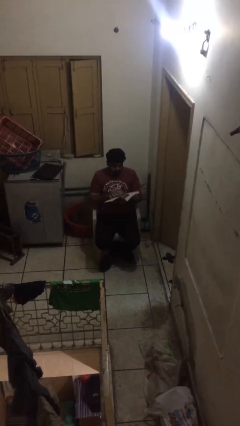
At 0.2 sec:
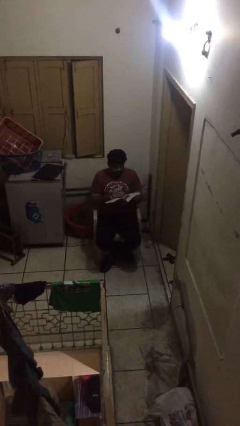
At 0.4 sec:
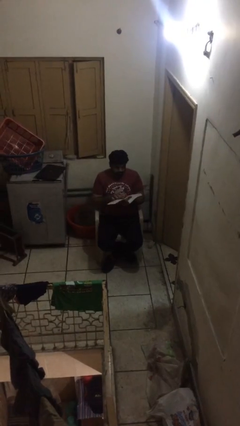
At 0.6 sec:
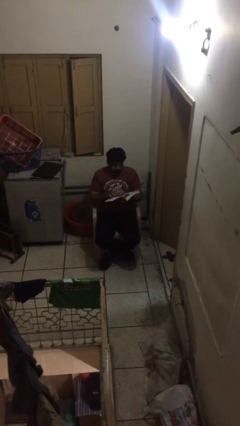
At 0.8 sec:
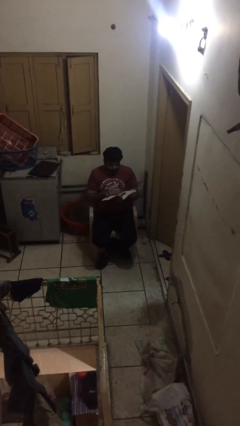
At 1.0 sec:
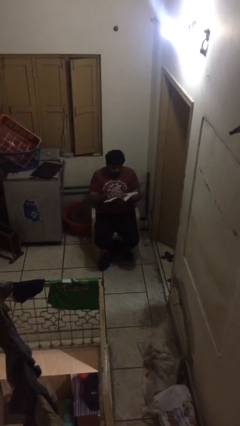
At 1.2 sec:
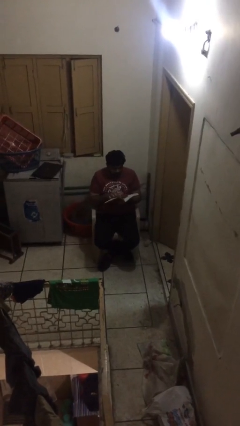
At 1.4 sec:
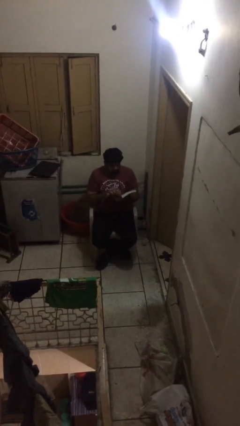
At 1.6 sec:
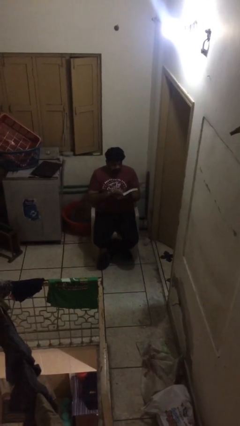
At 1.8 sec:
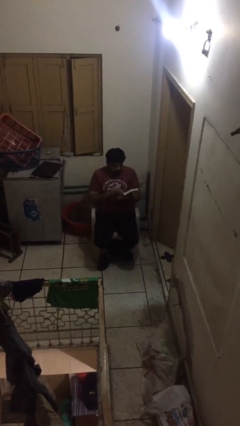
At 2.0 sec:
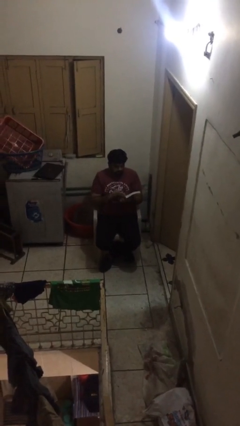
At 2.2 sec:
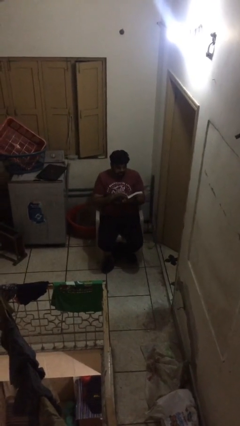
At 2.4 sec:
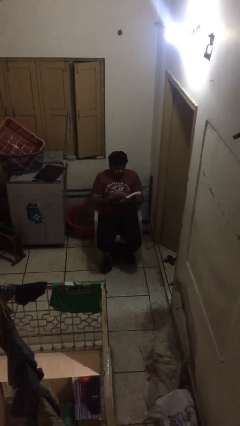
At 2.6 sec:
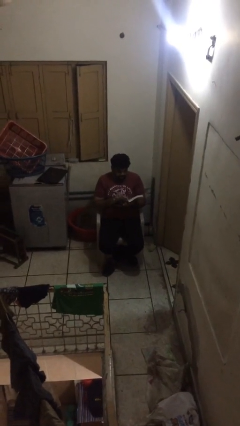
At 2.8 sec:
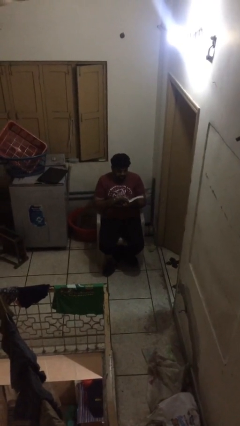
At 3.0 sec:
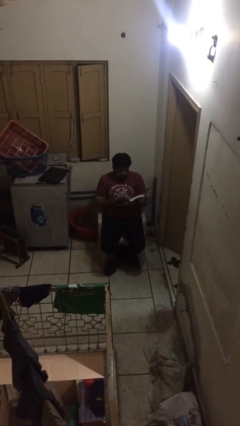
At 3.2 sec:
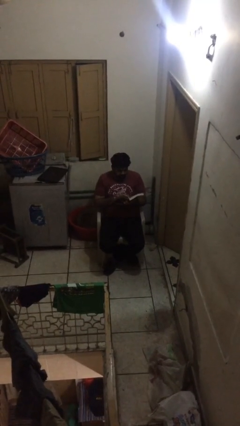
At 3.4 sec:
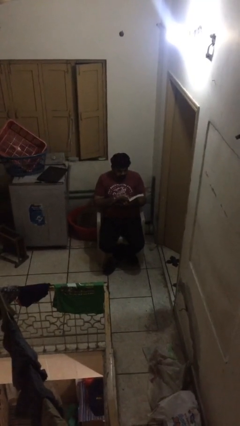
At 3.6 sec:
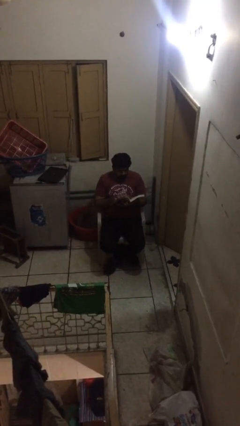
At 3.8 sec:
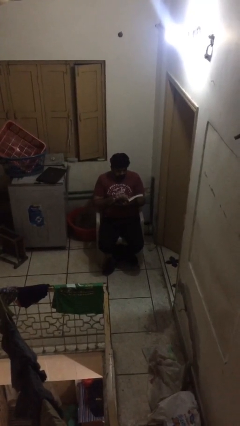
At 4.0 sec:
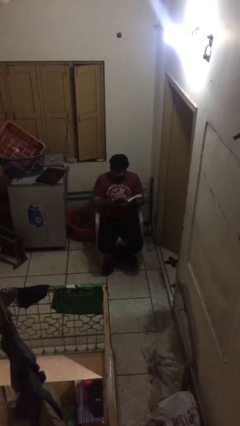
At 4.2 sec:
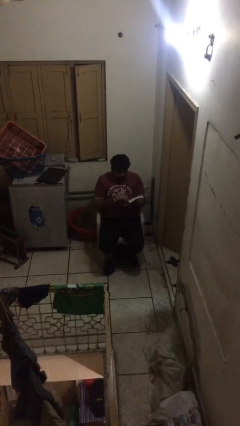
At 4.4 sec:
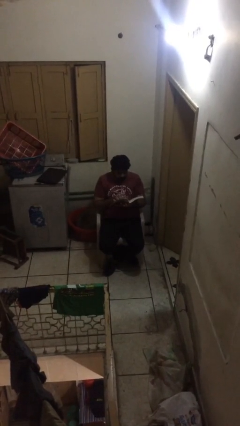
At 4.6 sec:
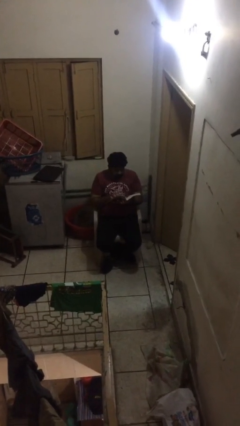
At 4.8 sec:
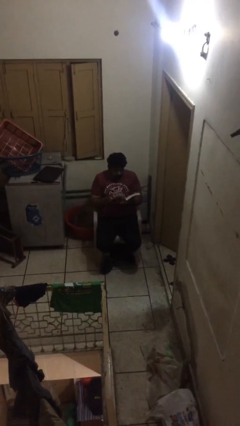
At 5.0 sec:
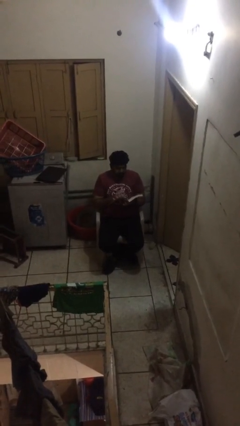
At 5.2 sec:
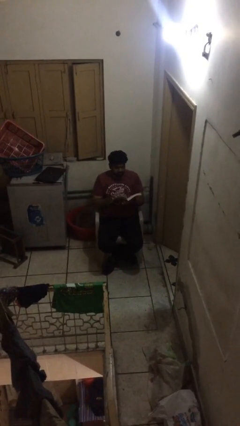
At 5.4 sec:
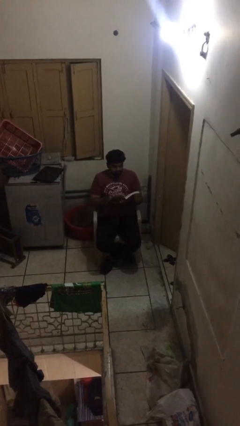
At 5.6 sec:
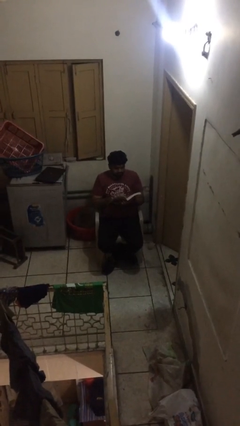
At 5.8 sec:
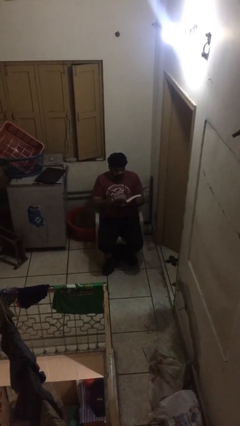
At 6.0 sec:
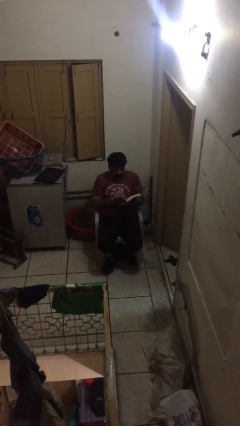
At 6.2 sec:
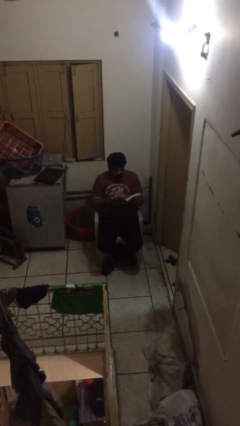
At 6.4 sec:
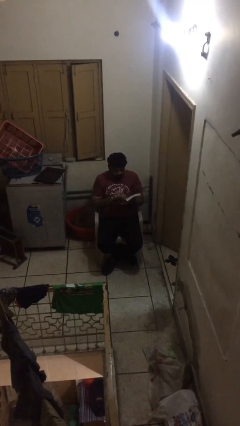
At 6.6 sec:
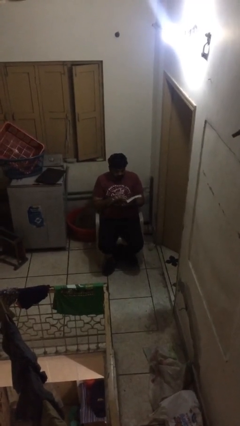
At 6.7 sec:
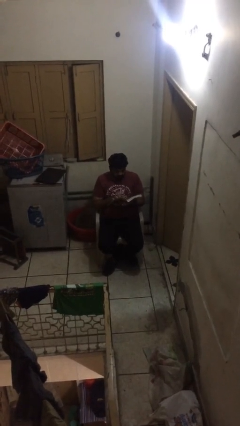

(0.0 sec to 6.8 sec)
person reads document

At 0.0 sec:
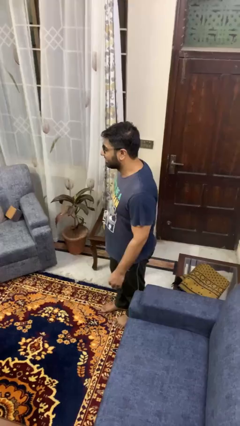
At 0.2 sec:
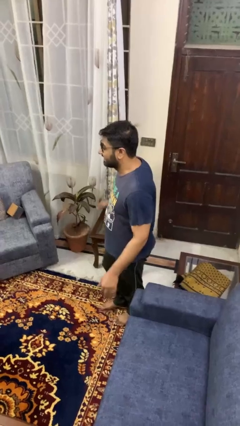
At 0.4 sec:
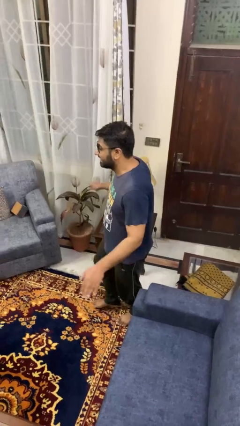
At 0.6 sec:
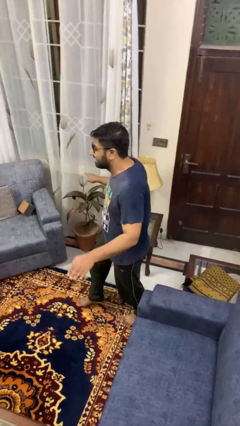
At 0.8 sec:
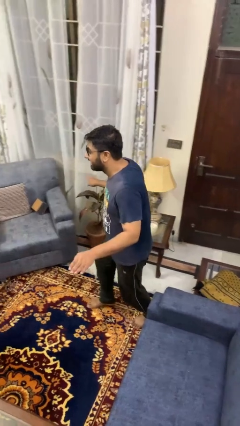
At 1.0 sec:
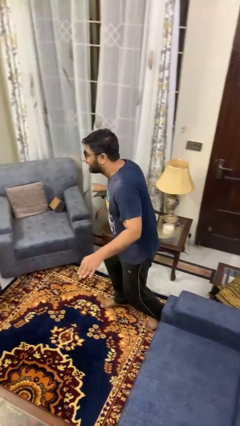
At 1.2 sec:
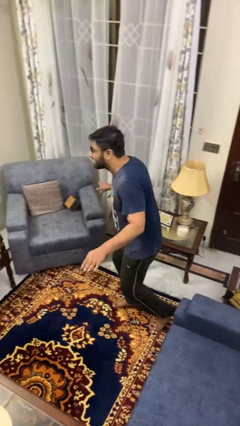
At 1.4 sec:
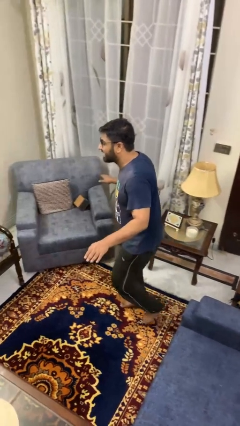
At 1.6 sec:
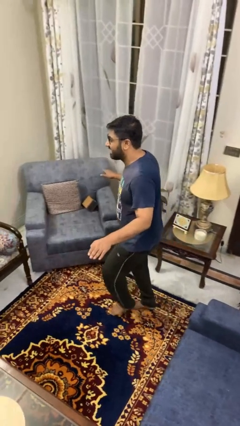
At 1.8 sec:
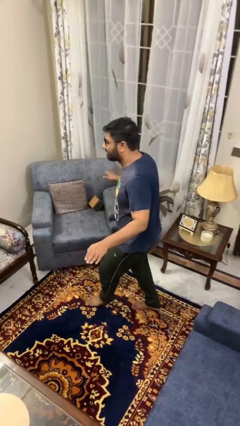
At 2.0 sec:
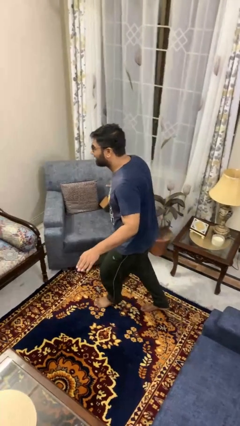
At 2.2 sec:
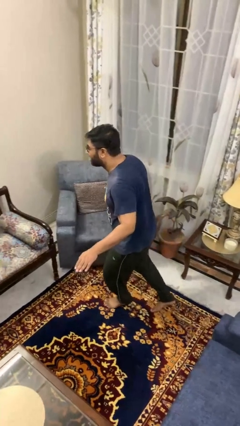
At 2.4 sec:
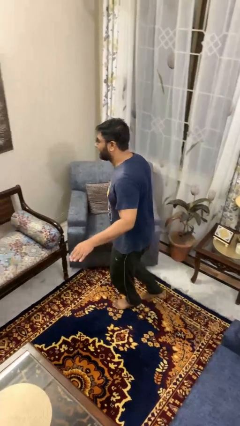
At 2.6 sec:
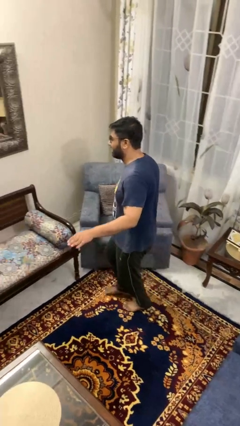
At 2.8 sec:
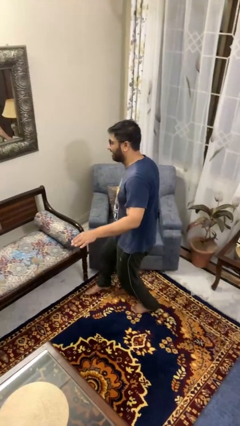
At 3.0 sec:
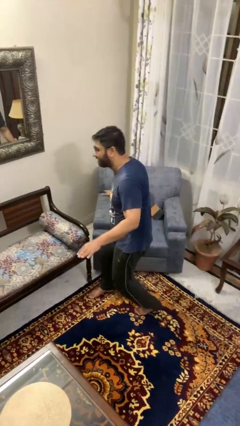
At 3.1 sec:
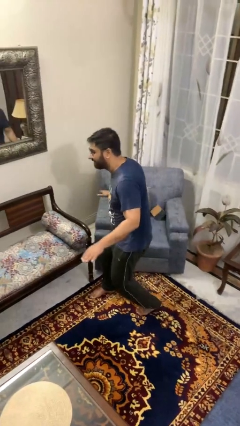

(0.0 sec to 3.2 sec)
person walks tiptoe

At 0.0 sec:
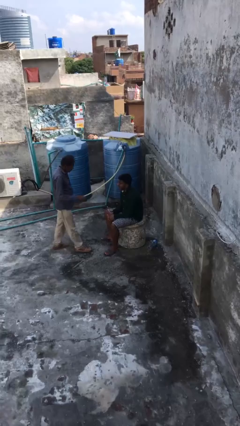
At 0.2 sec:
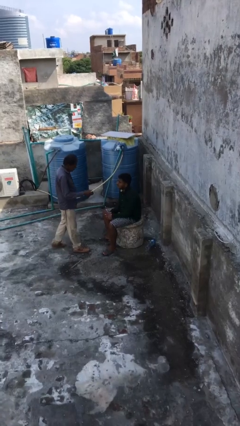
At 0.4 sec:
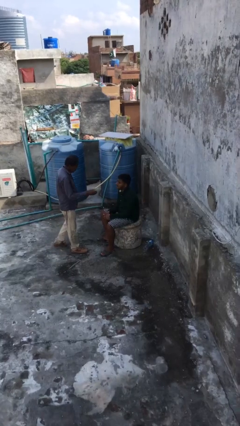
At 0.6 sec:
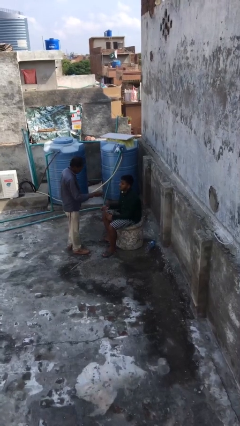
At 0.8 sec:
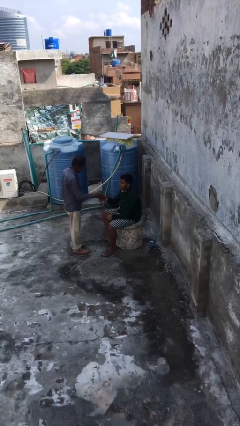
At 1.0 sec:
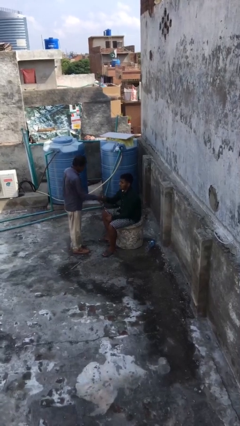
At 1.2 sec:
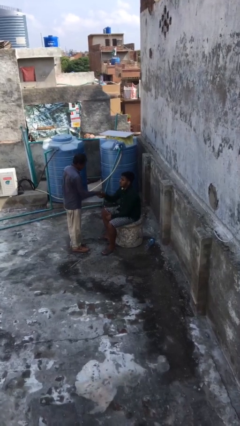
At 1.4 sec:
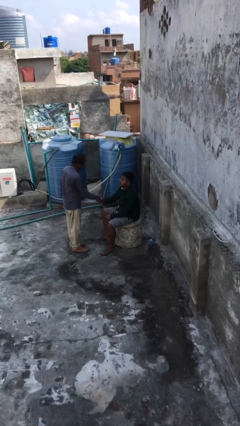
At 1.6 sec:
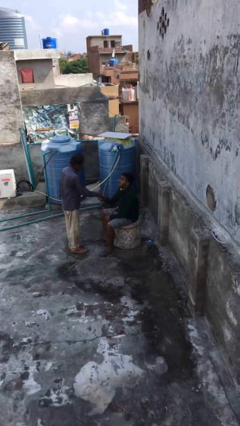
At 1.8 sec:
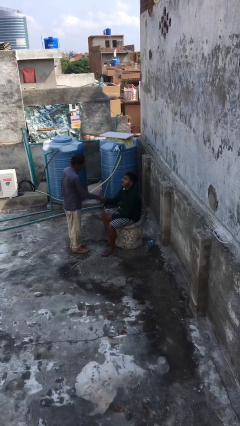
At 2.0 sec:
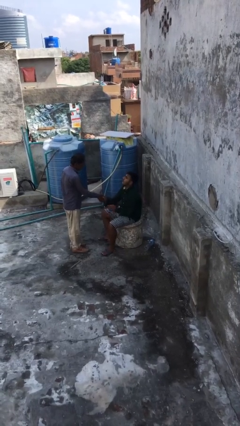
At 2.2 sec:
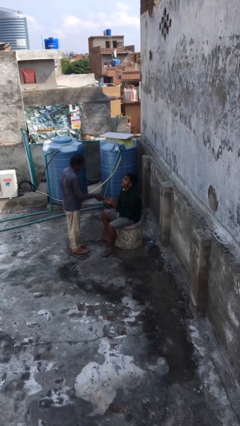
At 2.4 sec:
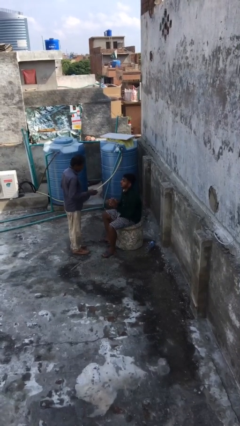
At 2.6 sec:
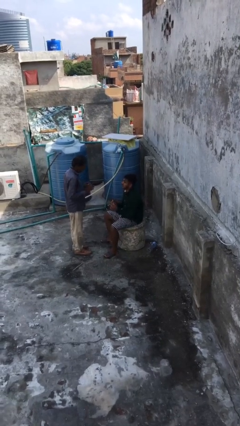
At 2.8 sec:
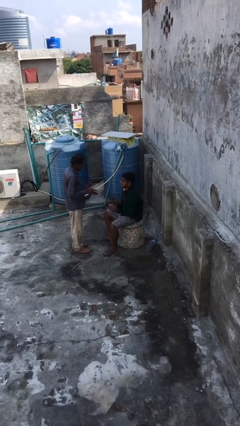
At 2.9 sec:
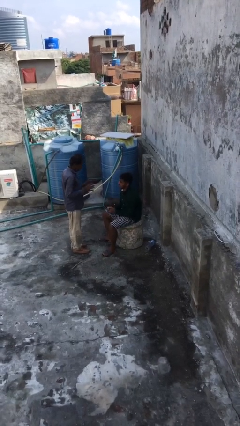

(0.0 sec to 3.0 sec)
person shakes hand

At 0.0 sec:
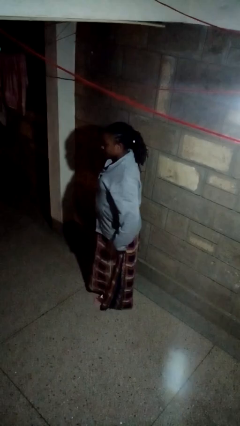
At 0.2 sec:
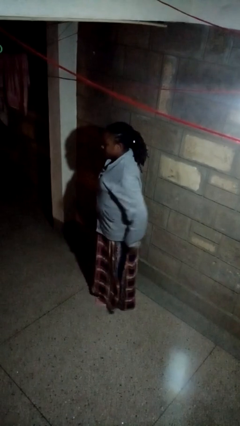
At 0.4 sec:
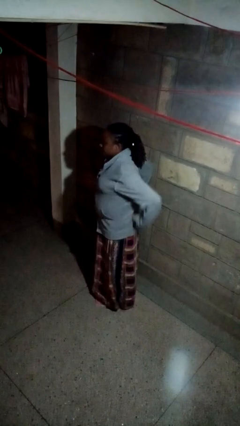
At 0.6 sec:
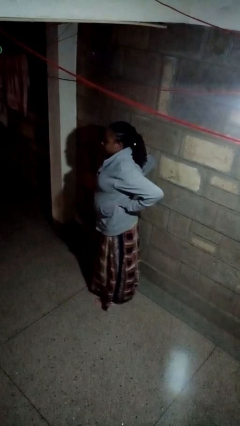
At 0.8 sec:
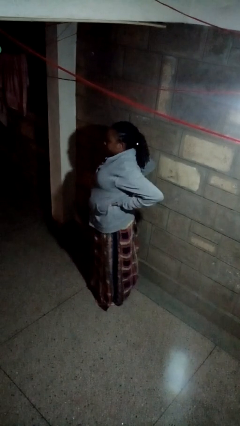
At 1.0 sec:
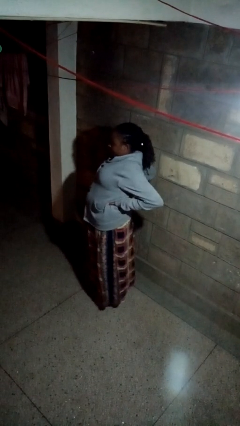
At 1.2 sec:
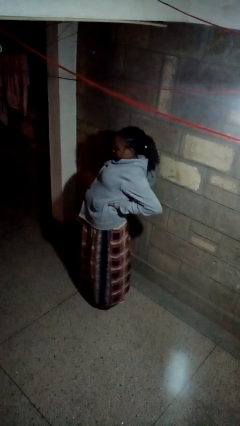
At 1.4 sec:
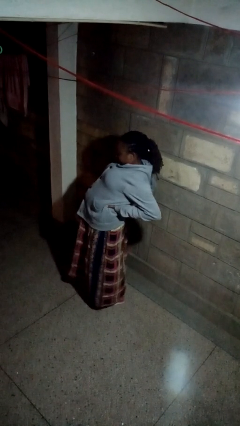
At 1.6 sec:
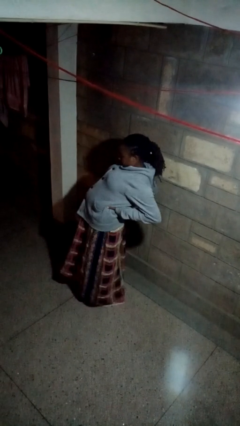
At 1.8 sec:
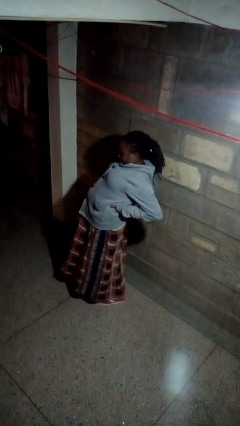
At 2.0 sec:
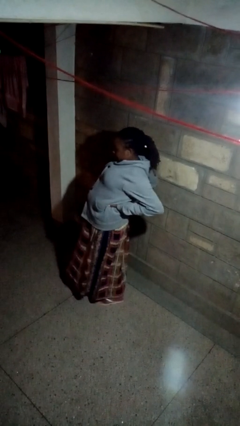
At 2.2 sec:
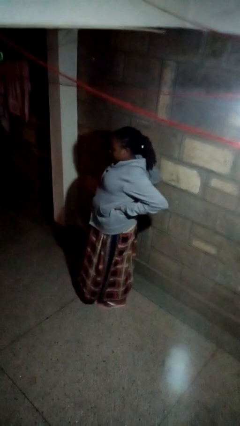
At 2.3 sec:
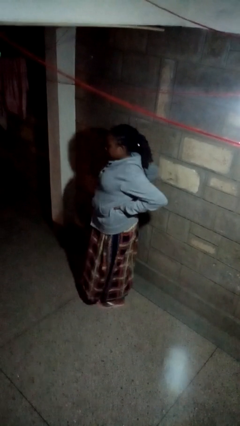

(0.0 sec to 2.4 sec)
person stretches back

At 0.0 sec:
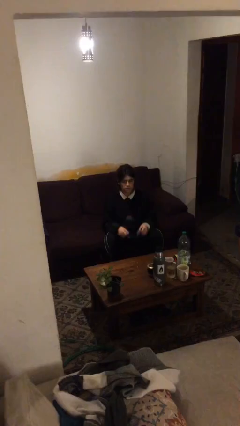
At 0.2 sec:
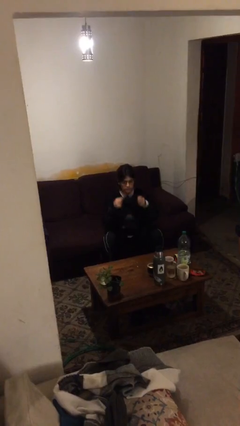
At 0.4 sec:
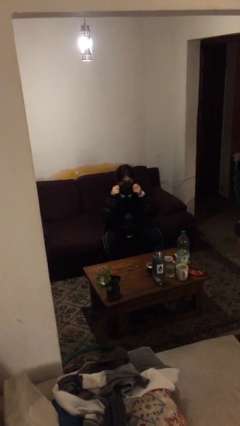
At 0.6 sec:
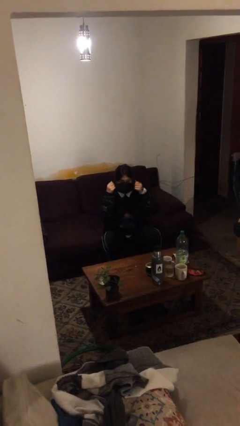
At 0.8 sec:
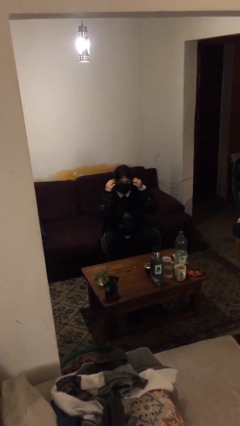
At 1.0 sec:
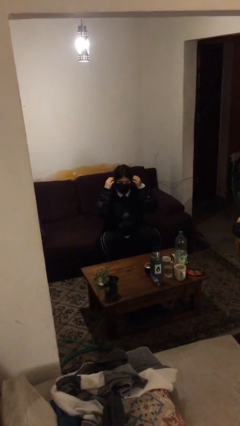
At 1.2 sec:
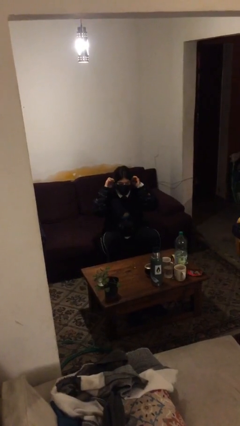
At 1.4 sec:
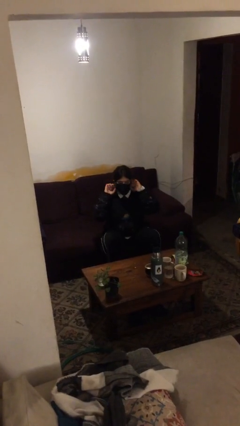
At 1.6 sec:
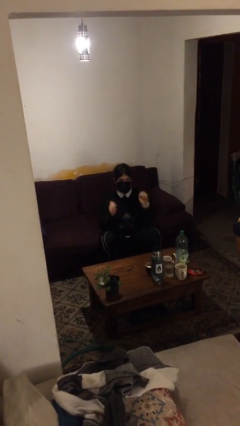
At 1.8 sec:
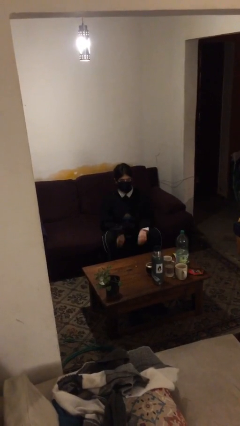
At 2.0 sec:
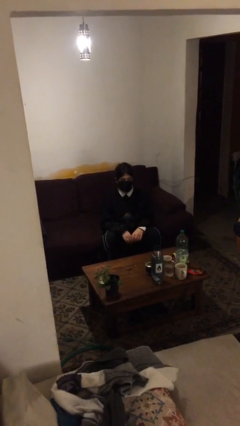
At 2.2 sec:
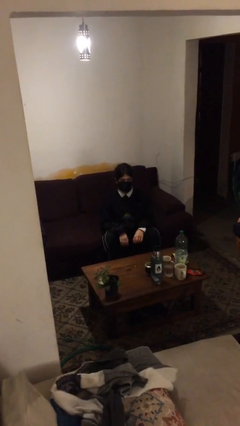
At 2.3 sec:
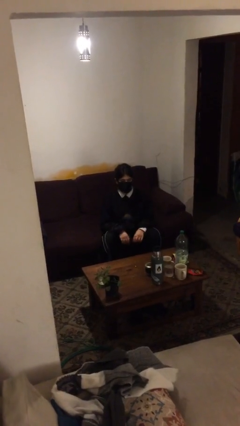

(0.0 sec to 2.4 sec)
person puts on facemask
